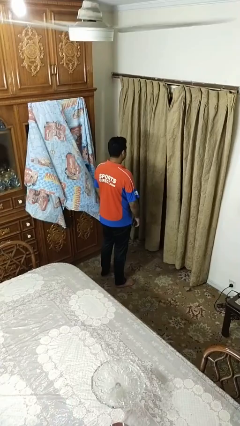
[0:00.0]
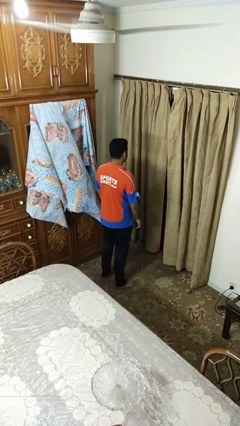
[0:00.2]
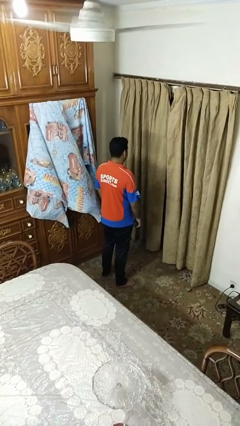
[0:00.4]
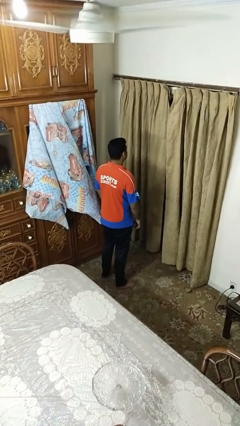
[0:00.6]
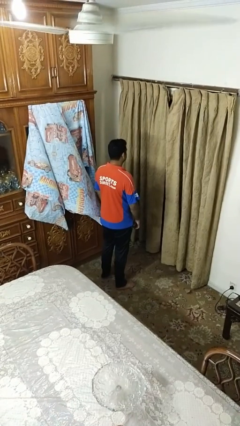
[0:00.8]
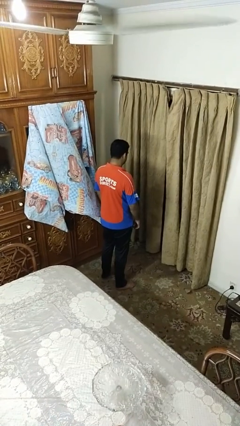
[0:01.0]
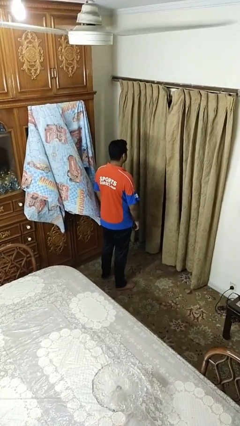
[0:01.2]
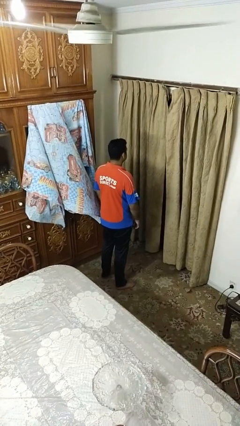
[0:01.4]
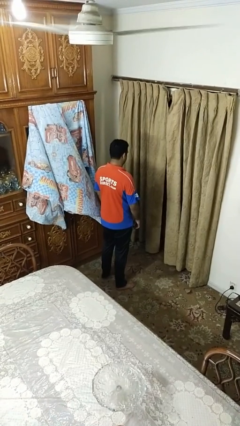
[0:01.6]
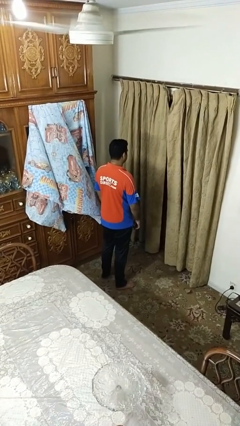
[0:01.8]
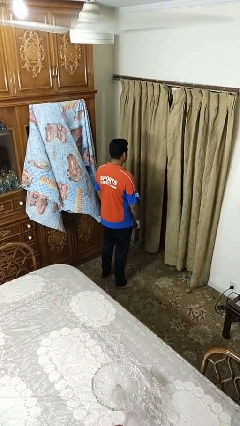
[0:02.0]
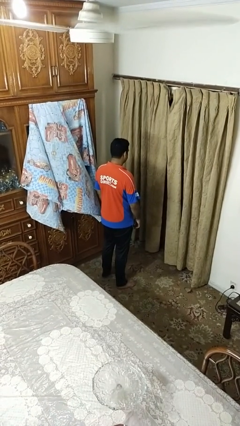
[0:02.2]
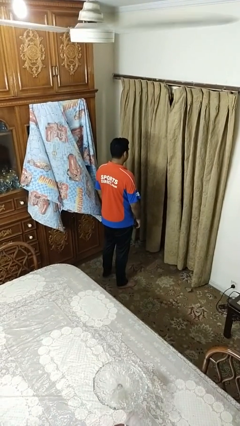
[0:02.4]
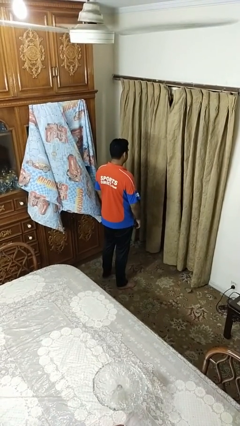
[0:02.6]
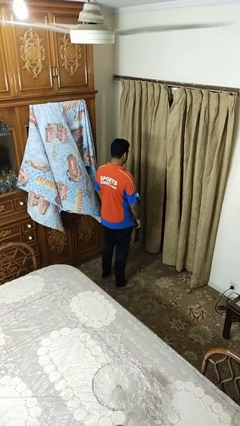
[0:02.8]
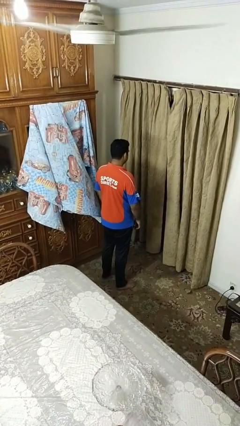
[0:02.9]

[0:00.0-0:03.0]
person nods head

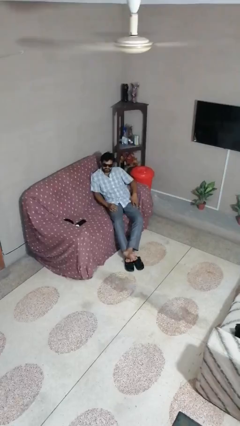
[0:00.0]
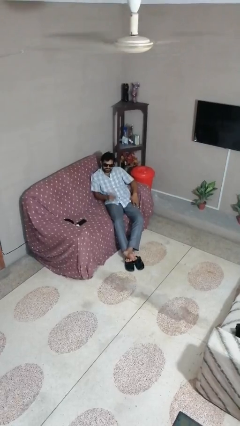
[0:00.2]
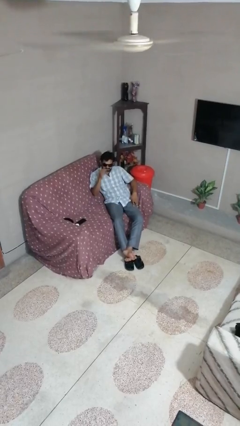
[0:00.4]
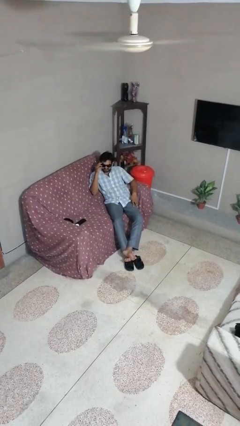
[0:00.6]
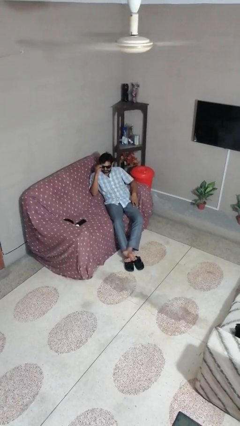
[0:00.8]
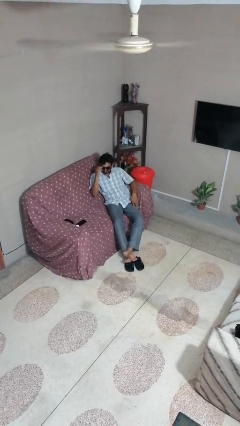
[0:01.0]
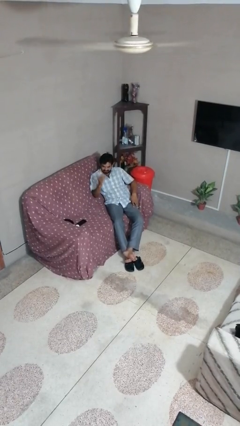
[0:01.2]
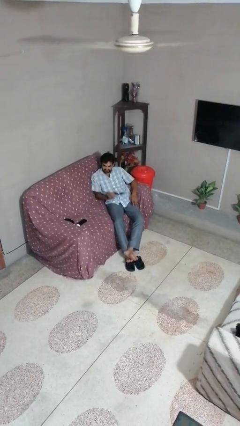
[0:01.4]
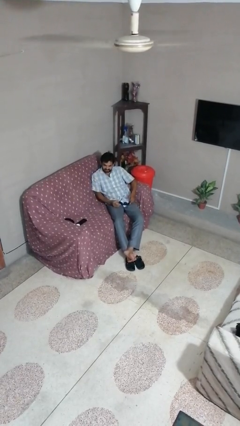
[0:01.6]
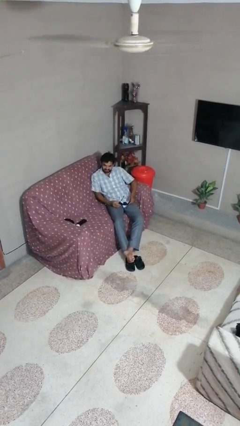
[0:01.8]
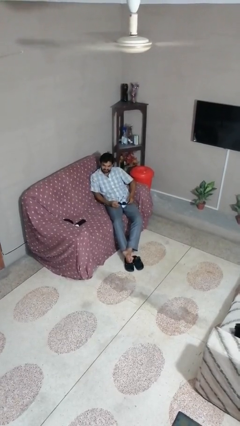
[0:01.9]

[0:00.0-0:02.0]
person takes off sunglasses

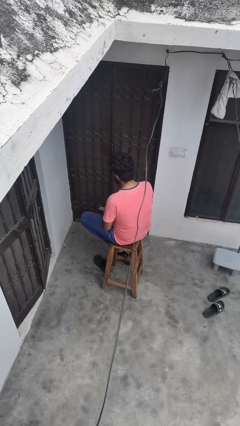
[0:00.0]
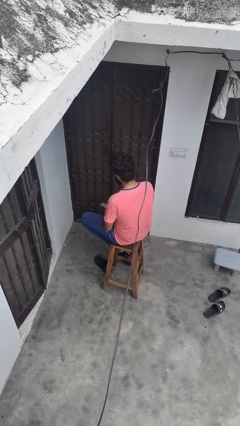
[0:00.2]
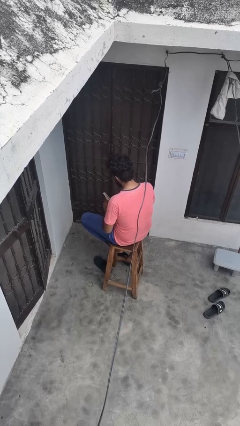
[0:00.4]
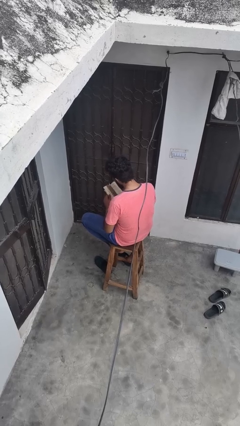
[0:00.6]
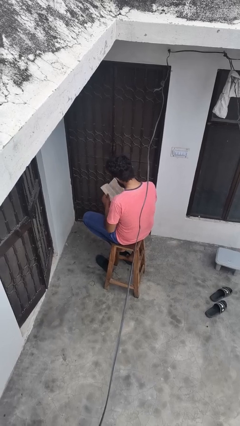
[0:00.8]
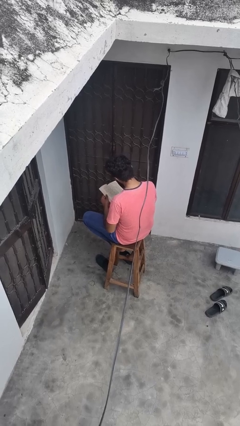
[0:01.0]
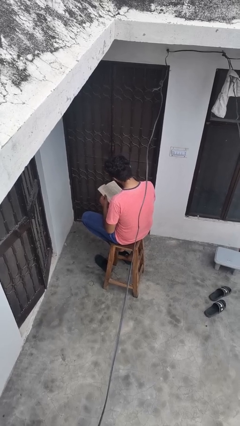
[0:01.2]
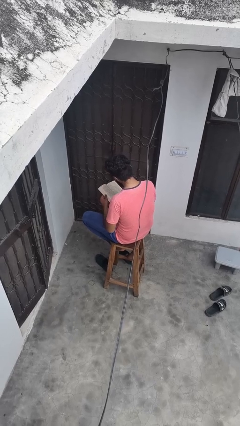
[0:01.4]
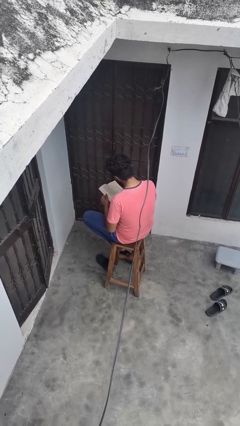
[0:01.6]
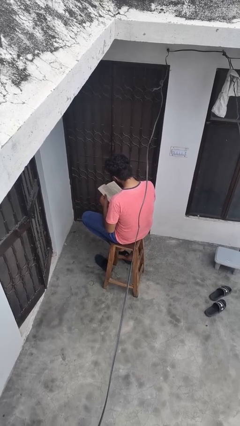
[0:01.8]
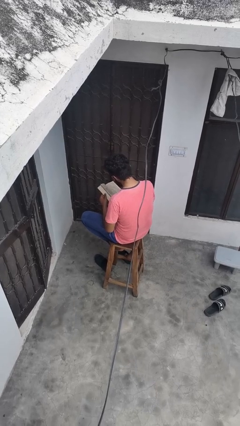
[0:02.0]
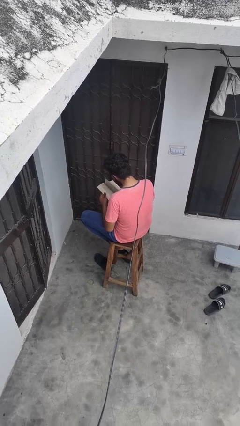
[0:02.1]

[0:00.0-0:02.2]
person reads book

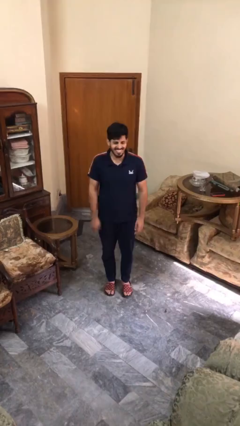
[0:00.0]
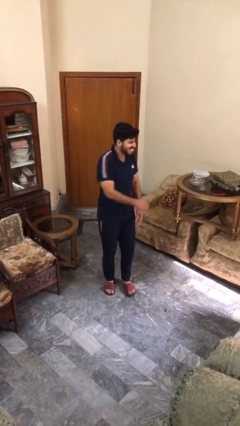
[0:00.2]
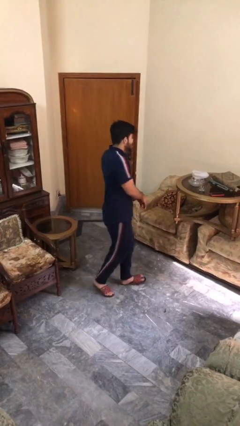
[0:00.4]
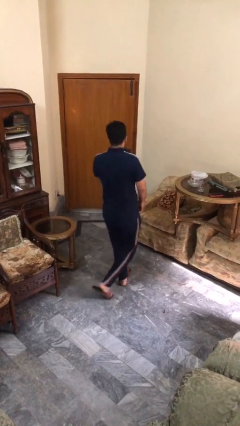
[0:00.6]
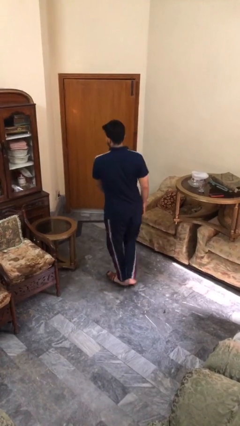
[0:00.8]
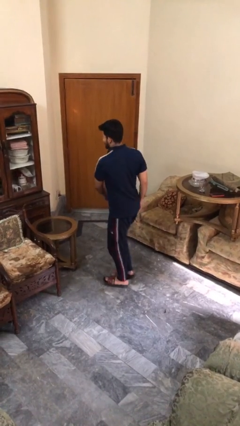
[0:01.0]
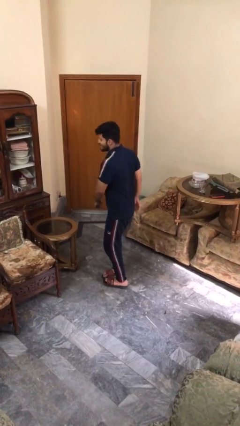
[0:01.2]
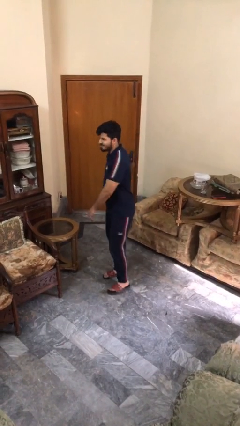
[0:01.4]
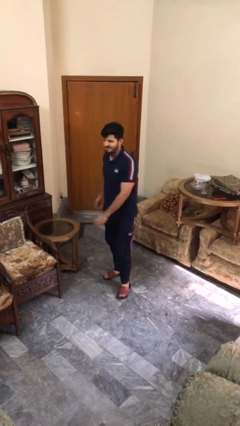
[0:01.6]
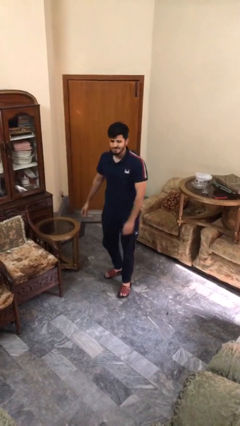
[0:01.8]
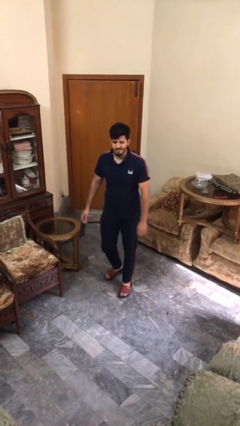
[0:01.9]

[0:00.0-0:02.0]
person twirls

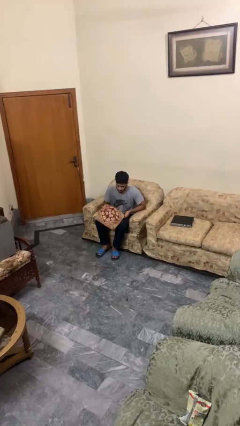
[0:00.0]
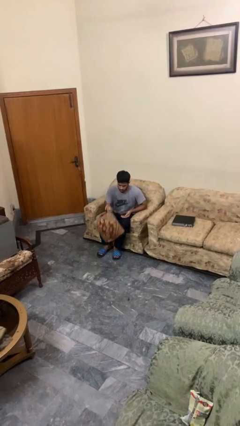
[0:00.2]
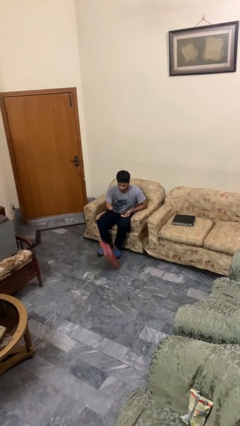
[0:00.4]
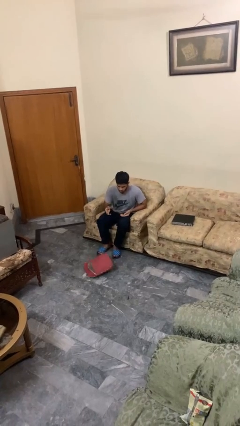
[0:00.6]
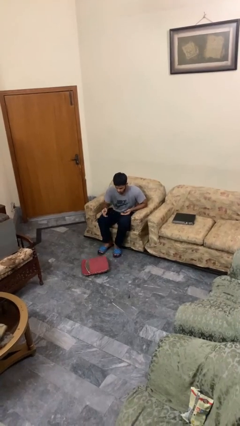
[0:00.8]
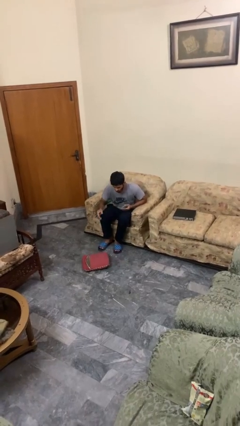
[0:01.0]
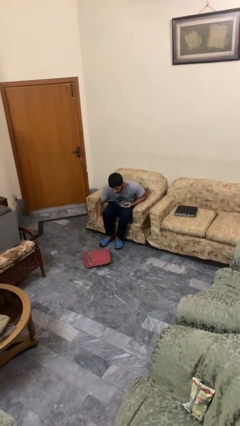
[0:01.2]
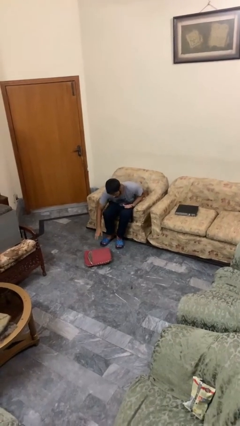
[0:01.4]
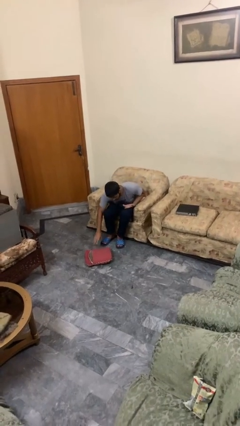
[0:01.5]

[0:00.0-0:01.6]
person drops object

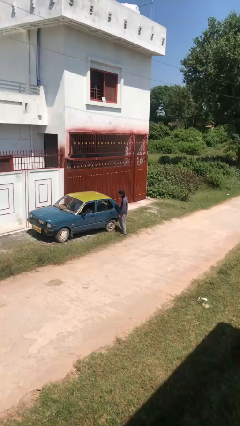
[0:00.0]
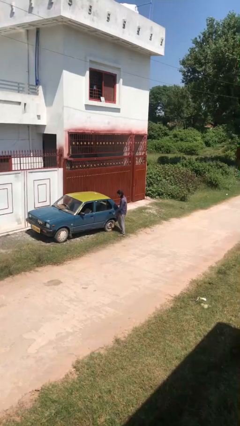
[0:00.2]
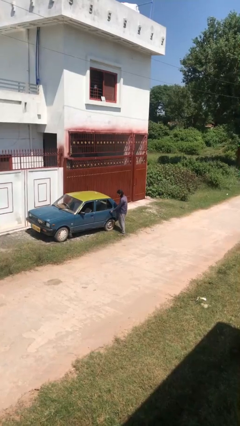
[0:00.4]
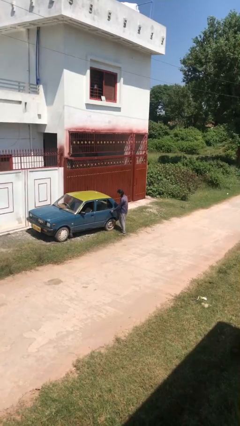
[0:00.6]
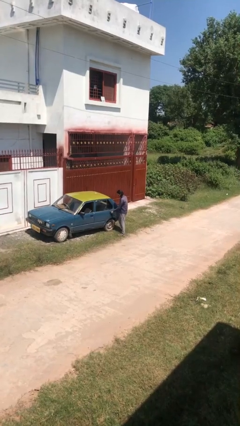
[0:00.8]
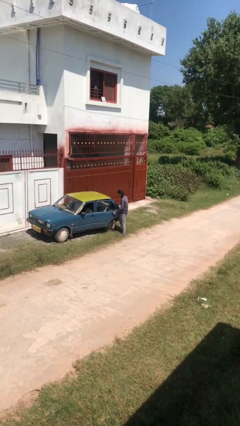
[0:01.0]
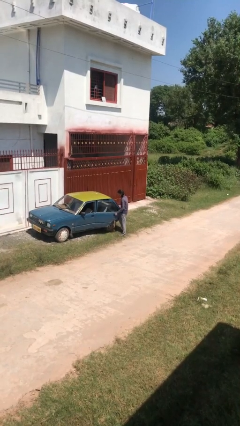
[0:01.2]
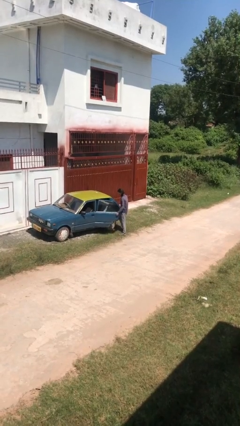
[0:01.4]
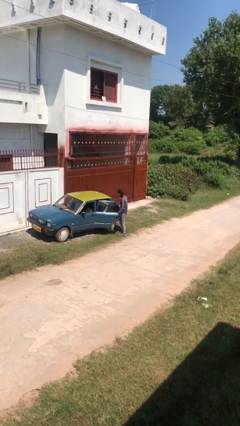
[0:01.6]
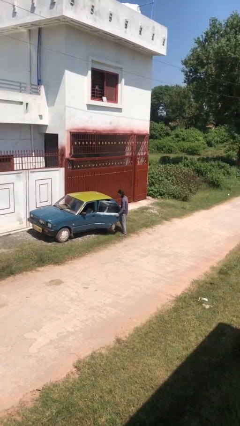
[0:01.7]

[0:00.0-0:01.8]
person opens car door

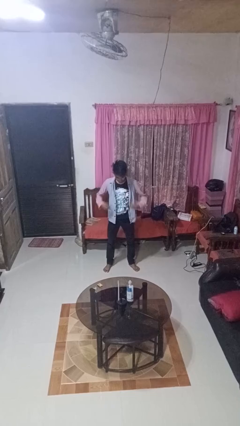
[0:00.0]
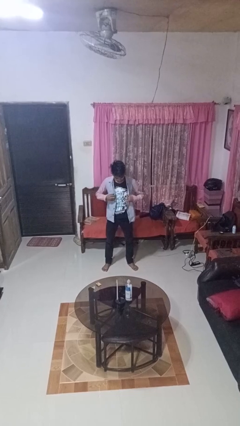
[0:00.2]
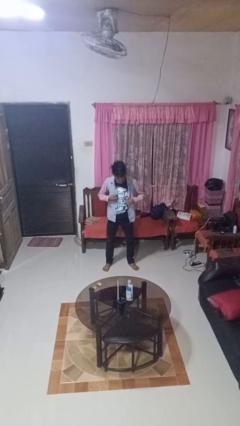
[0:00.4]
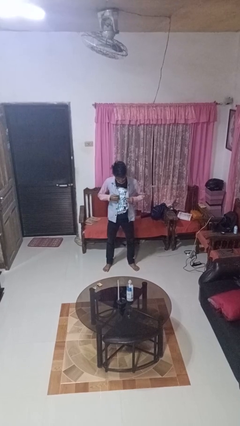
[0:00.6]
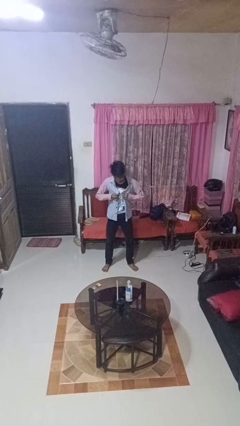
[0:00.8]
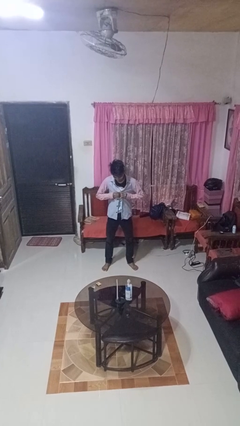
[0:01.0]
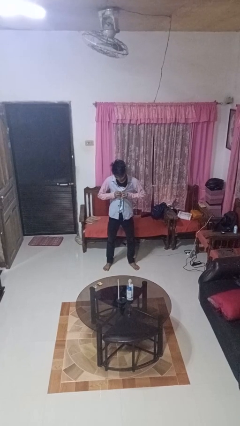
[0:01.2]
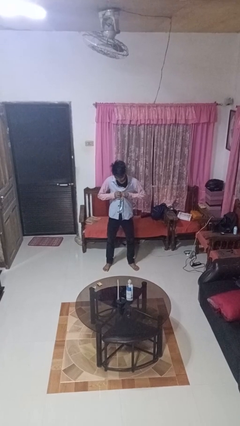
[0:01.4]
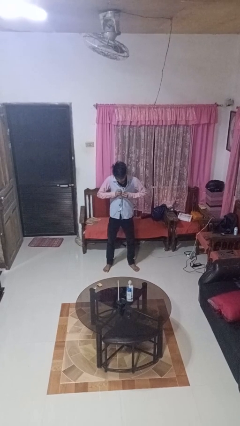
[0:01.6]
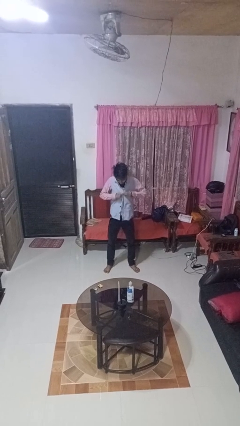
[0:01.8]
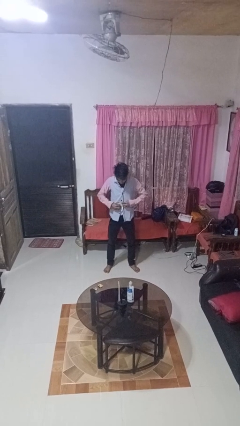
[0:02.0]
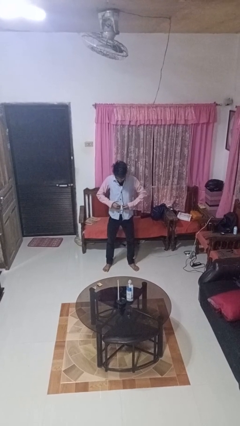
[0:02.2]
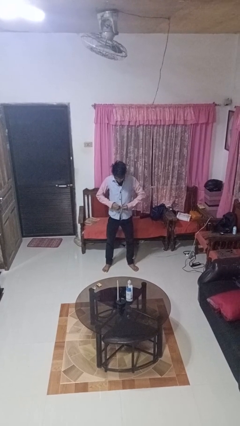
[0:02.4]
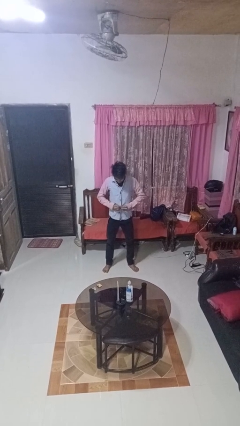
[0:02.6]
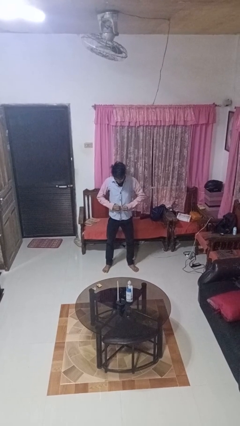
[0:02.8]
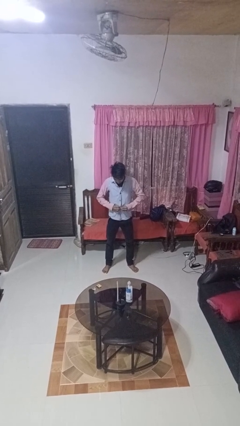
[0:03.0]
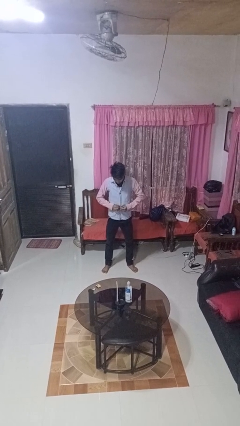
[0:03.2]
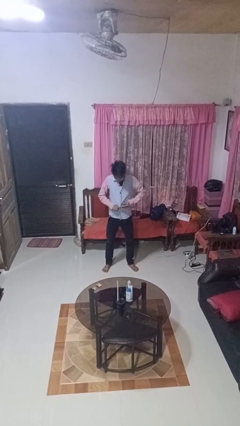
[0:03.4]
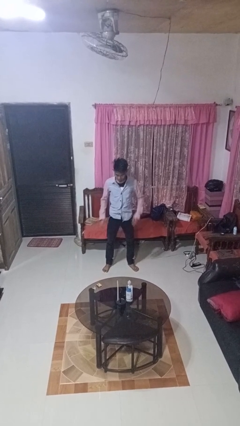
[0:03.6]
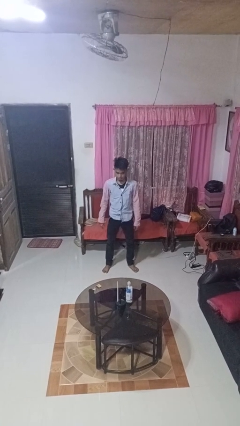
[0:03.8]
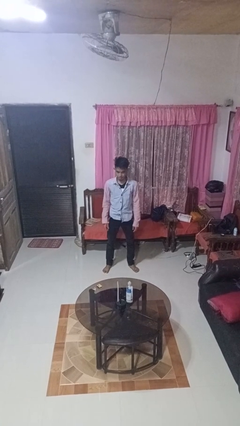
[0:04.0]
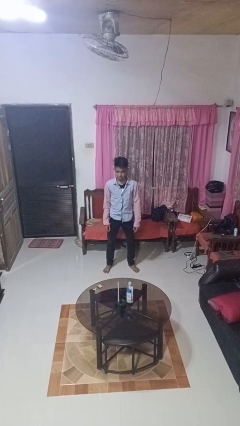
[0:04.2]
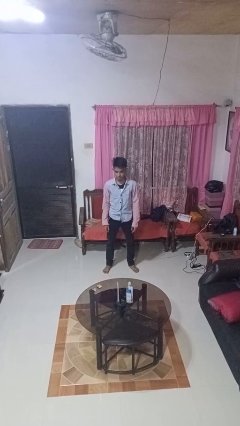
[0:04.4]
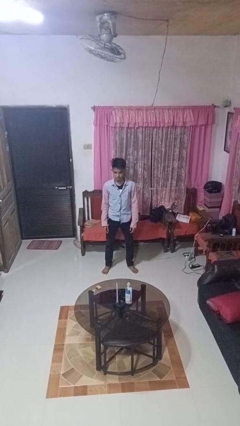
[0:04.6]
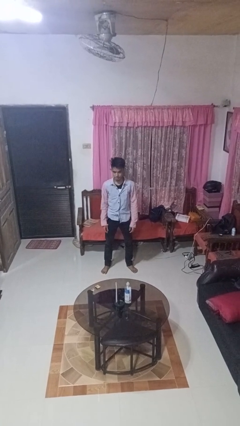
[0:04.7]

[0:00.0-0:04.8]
person buttons shirt
